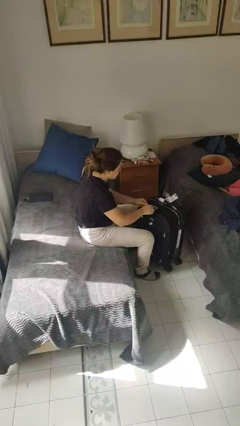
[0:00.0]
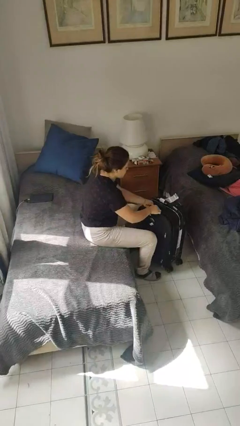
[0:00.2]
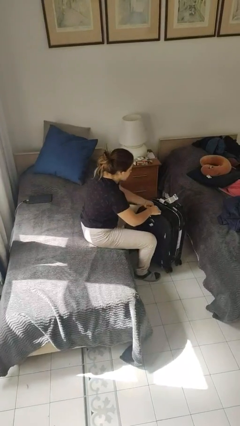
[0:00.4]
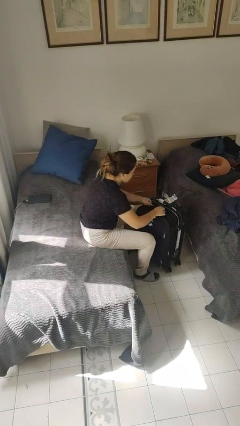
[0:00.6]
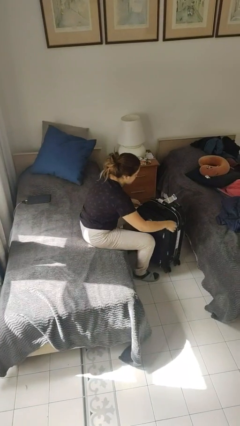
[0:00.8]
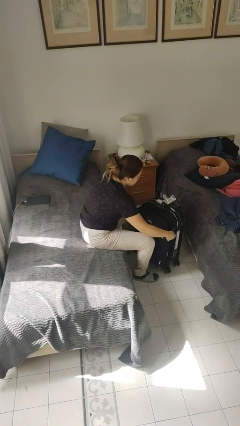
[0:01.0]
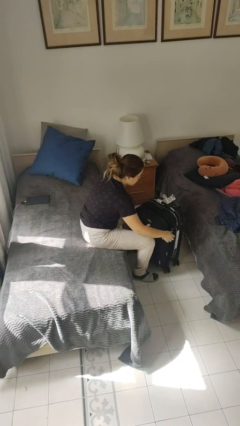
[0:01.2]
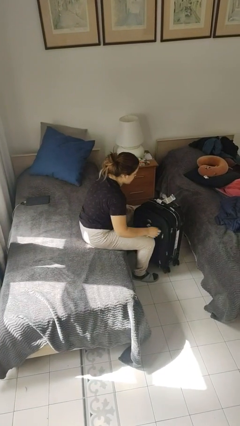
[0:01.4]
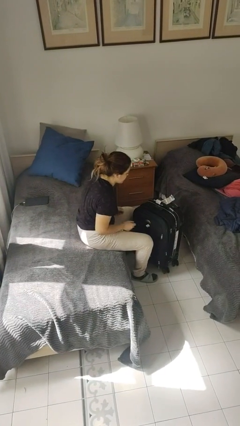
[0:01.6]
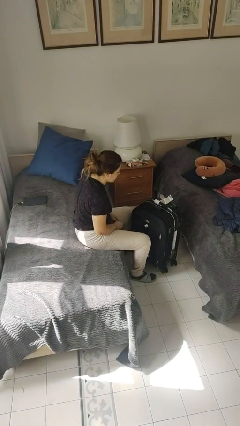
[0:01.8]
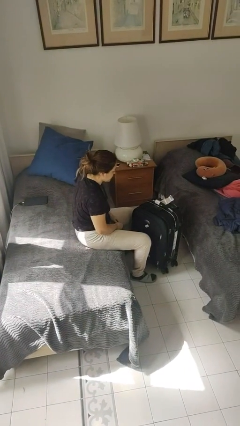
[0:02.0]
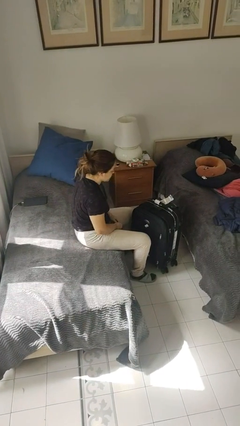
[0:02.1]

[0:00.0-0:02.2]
person opens suitcase

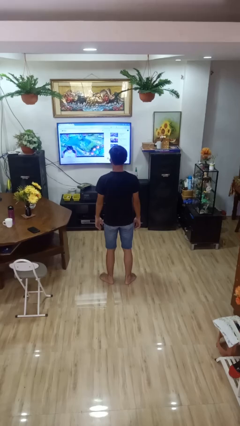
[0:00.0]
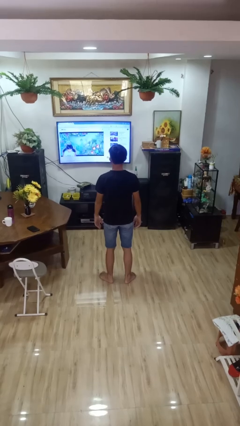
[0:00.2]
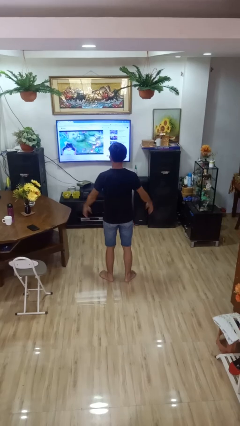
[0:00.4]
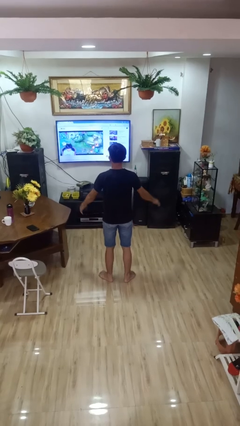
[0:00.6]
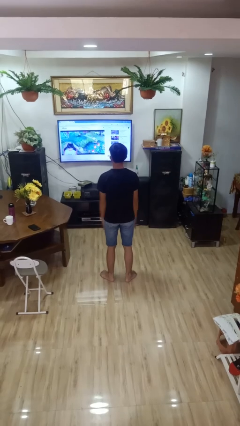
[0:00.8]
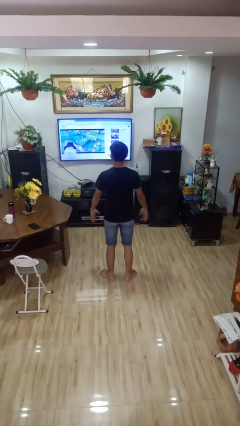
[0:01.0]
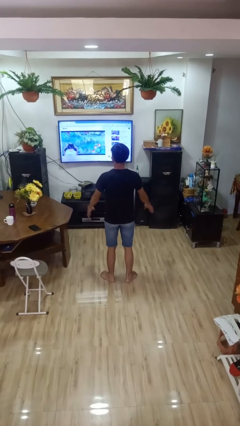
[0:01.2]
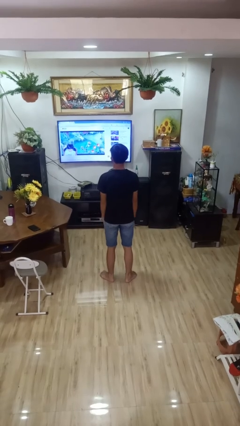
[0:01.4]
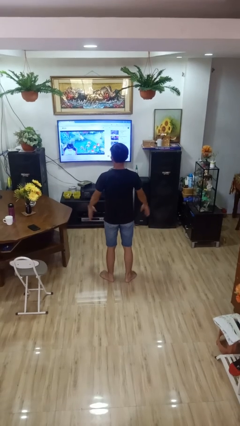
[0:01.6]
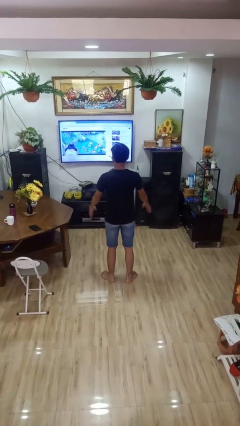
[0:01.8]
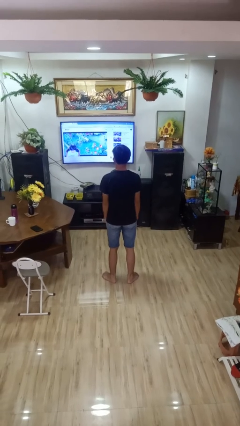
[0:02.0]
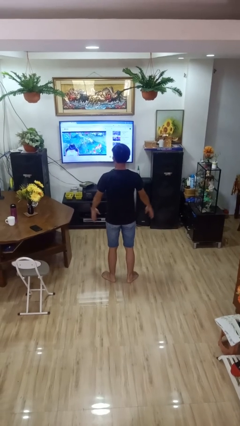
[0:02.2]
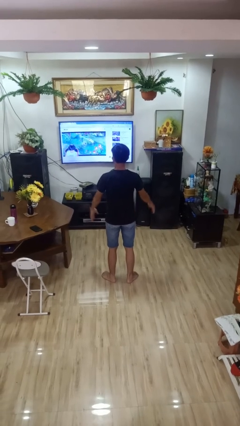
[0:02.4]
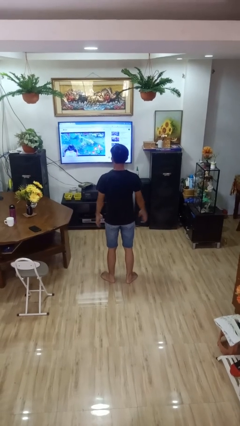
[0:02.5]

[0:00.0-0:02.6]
person slaps hands on thighs

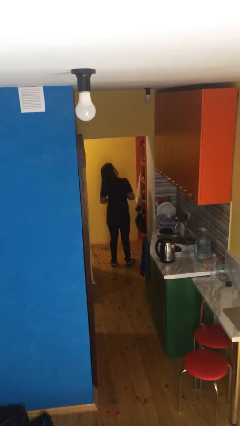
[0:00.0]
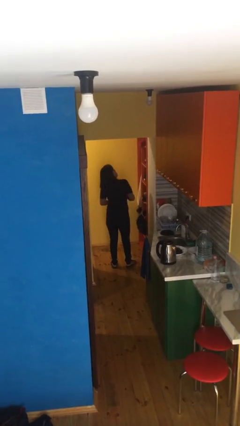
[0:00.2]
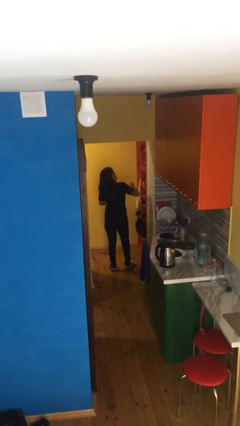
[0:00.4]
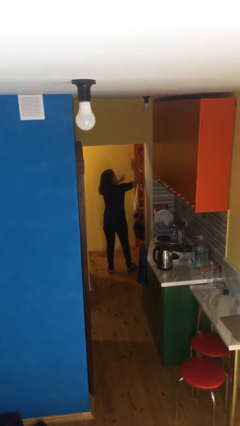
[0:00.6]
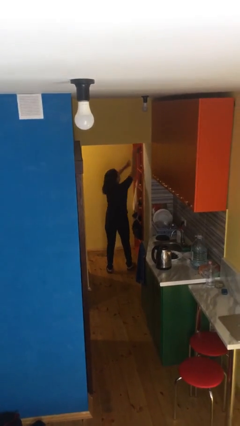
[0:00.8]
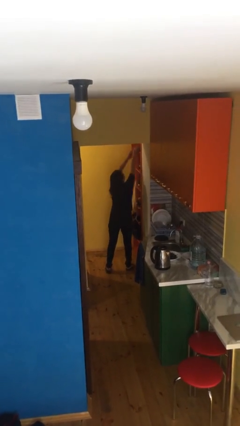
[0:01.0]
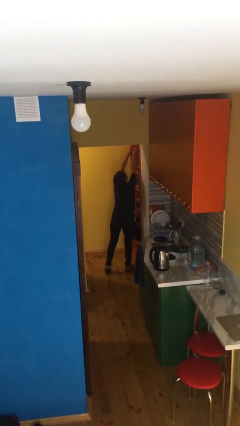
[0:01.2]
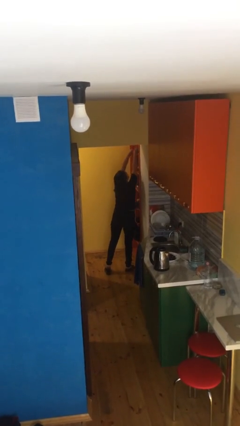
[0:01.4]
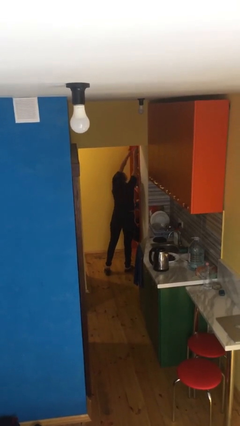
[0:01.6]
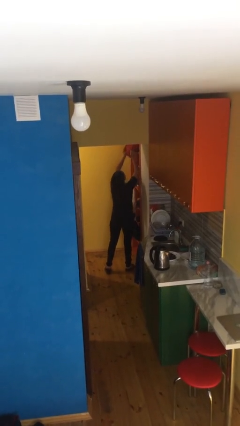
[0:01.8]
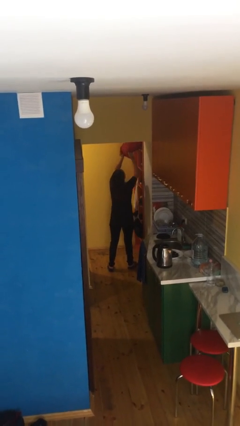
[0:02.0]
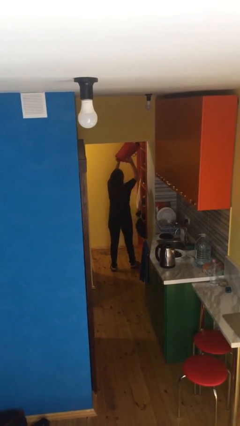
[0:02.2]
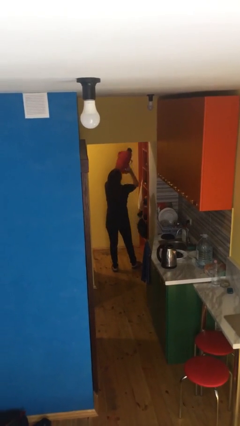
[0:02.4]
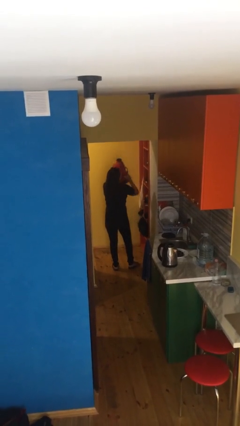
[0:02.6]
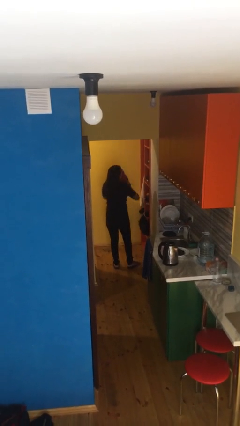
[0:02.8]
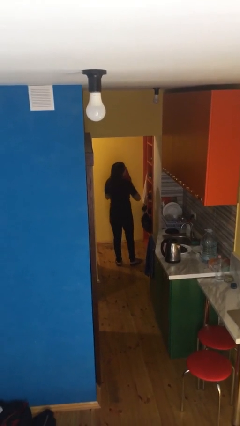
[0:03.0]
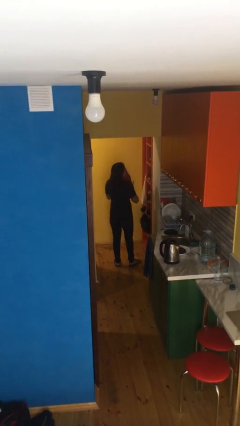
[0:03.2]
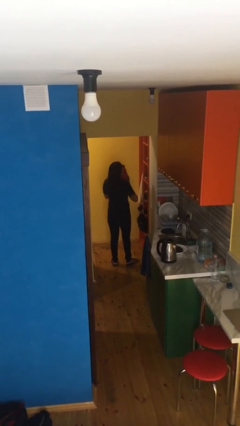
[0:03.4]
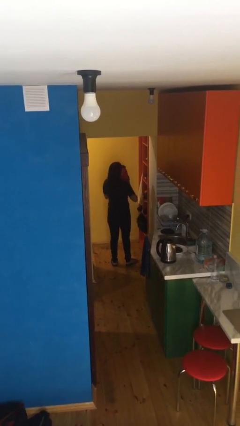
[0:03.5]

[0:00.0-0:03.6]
person picks up object from shelf

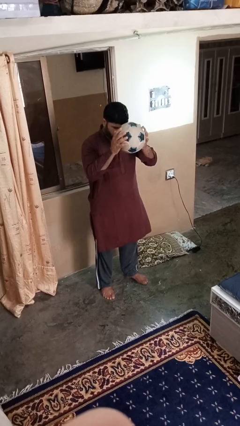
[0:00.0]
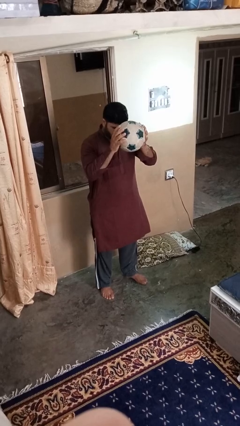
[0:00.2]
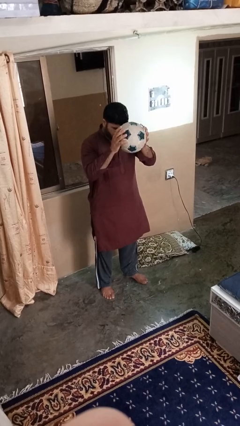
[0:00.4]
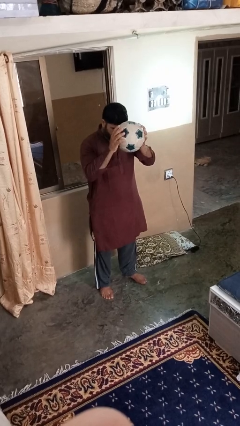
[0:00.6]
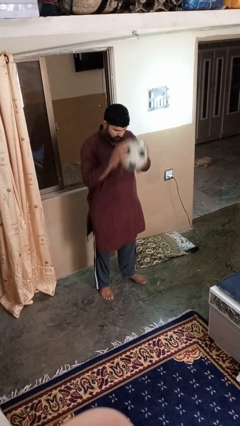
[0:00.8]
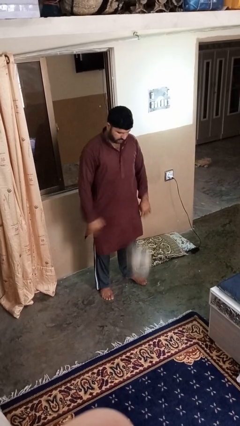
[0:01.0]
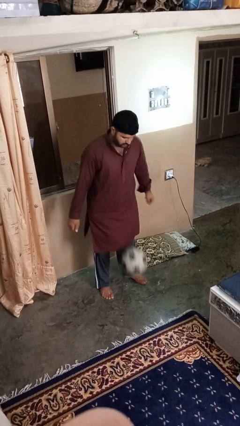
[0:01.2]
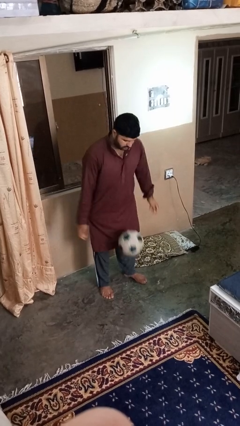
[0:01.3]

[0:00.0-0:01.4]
person bounces ball on floor

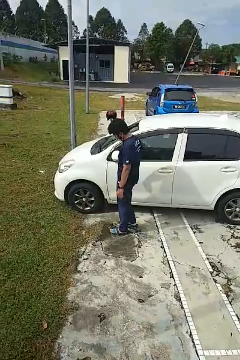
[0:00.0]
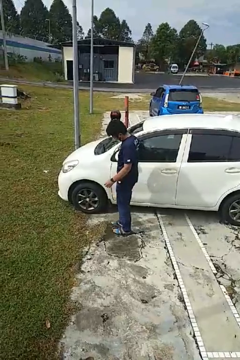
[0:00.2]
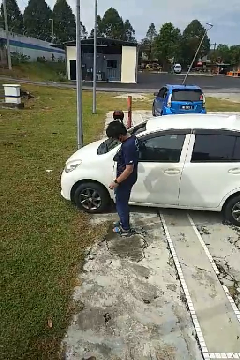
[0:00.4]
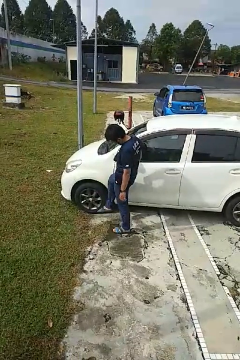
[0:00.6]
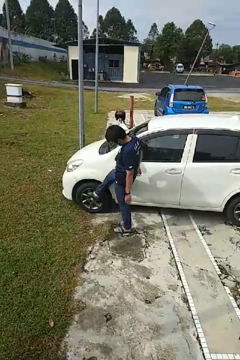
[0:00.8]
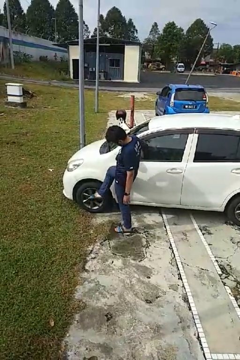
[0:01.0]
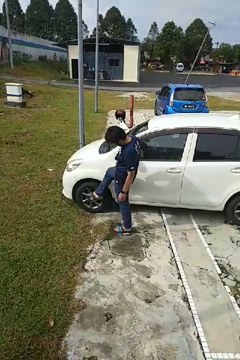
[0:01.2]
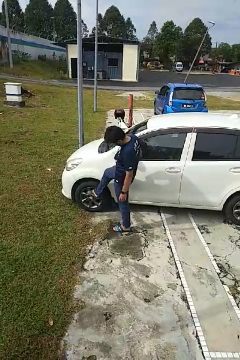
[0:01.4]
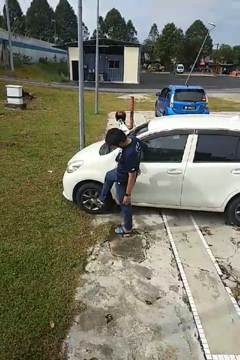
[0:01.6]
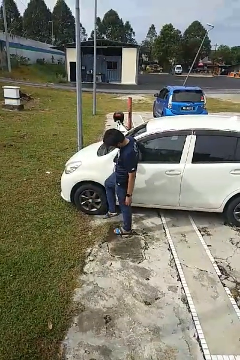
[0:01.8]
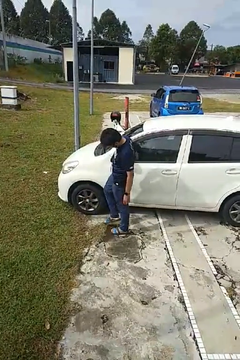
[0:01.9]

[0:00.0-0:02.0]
person kicks car tires

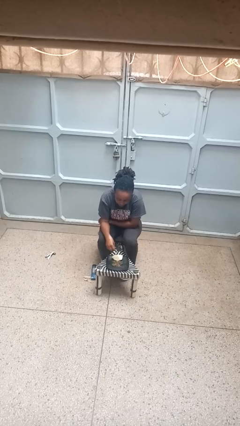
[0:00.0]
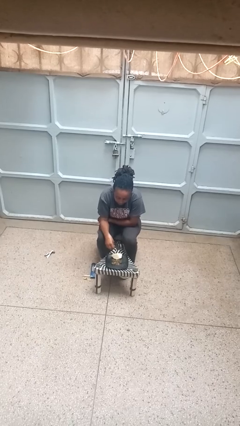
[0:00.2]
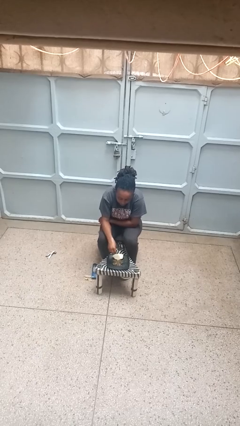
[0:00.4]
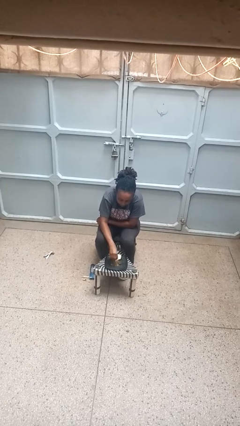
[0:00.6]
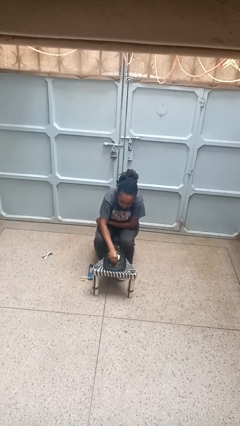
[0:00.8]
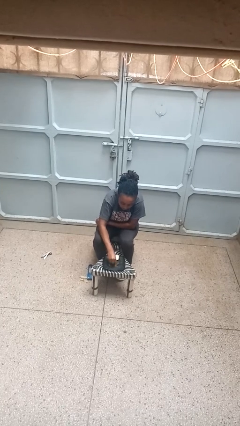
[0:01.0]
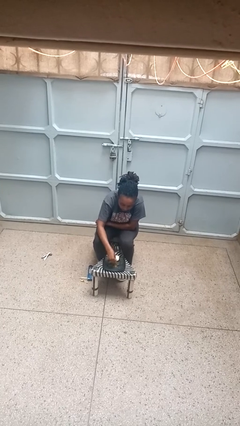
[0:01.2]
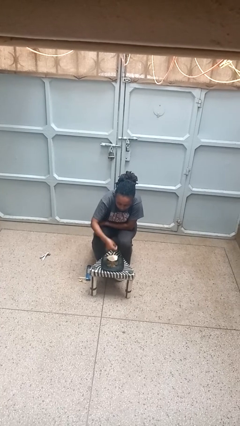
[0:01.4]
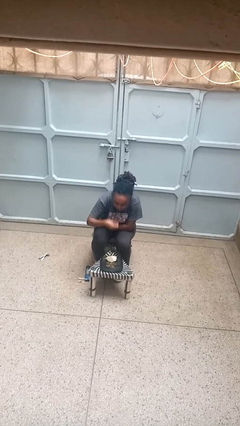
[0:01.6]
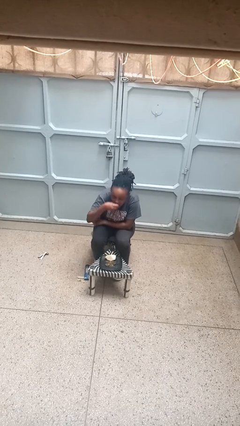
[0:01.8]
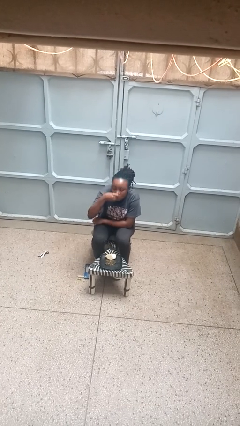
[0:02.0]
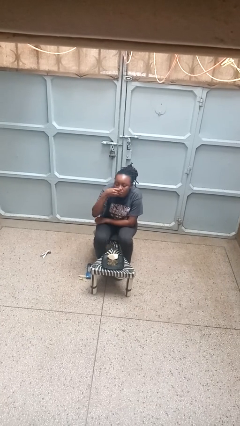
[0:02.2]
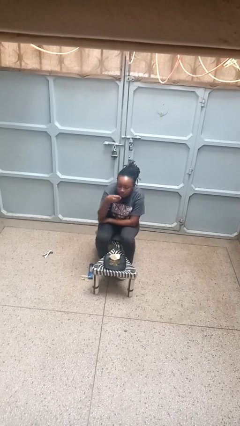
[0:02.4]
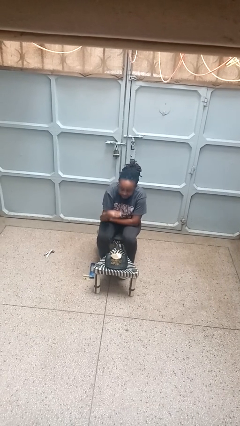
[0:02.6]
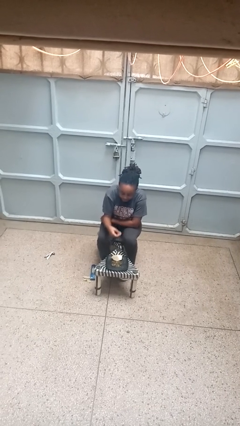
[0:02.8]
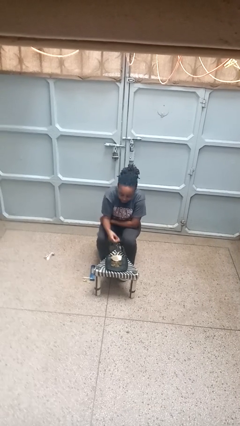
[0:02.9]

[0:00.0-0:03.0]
person eats with hands

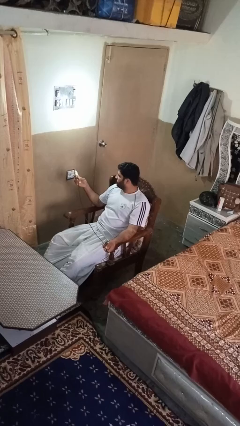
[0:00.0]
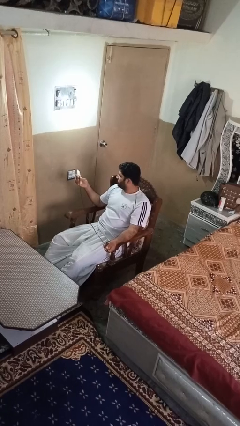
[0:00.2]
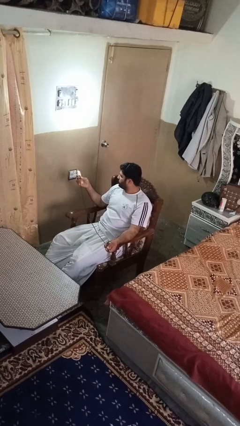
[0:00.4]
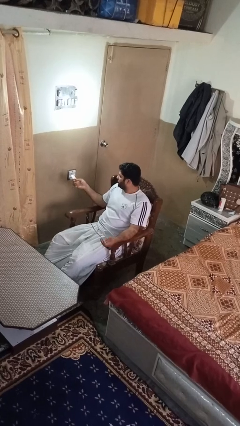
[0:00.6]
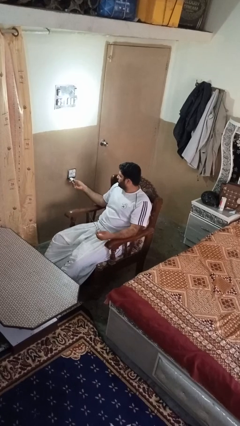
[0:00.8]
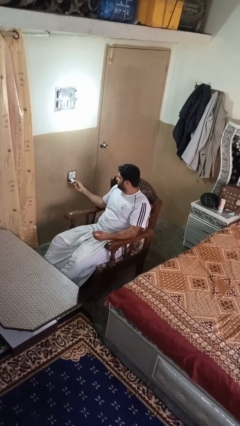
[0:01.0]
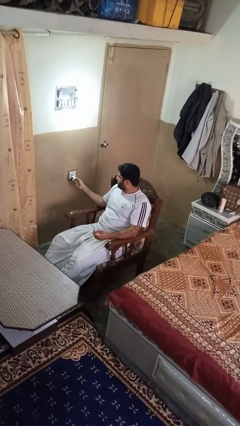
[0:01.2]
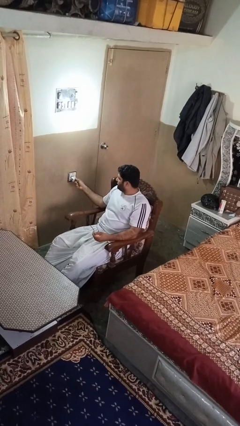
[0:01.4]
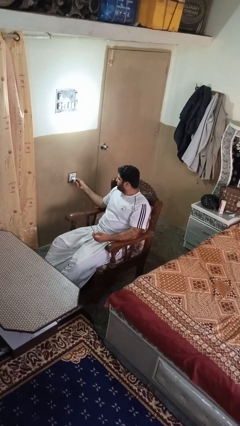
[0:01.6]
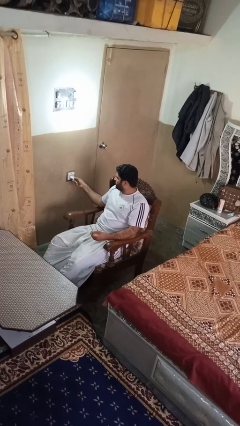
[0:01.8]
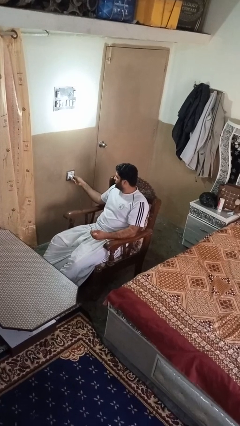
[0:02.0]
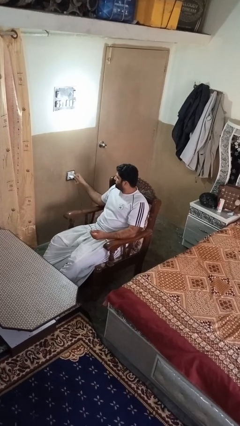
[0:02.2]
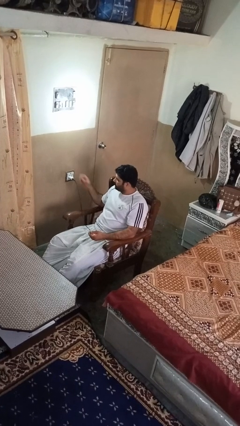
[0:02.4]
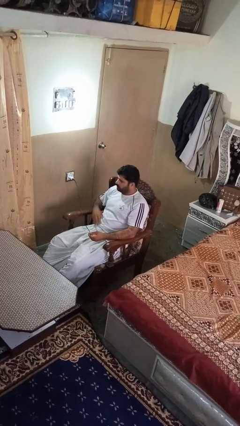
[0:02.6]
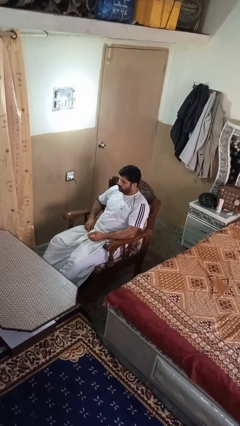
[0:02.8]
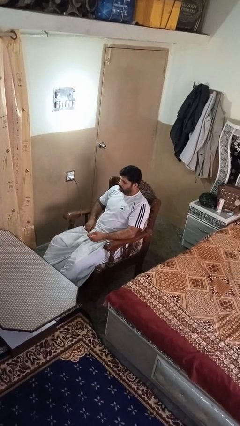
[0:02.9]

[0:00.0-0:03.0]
person plugs into electrical socket
